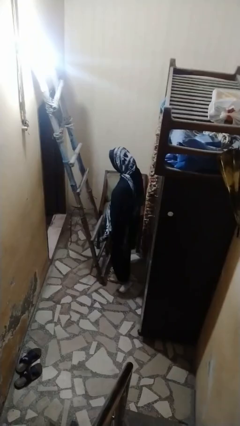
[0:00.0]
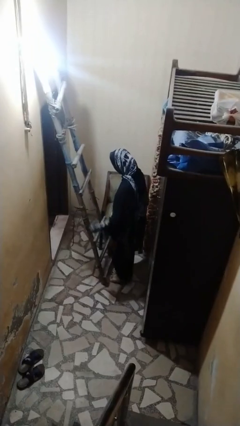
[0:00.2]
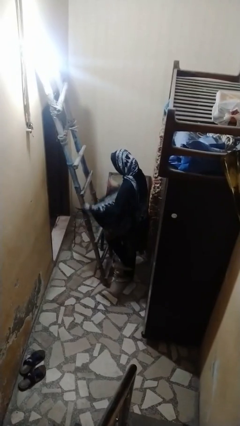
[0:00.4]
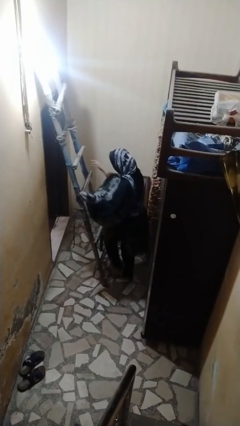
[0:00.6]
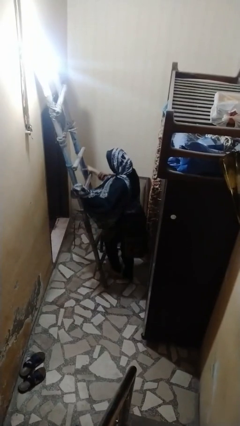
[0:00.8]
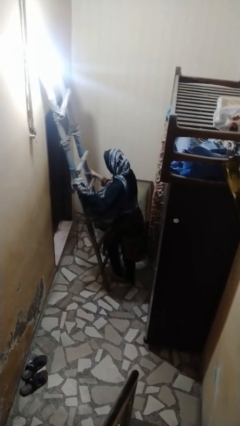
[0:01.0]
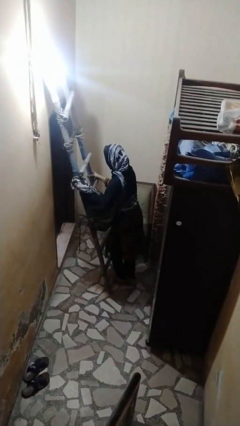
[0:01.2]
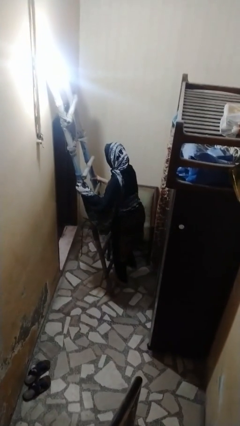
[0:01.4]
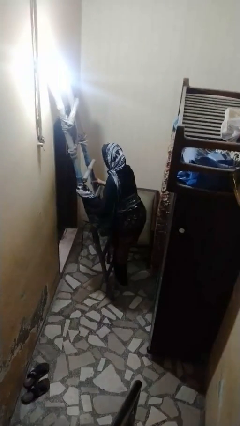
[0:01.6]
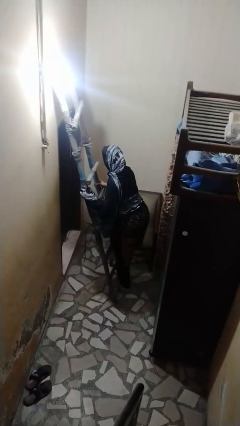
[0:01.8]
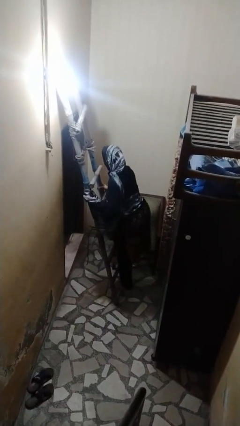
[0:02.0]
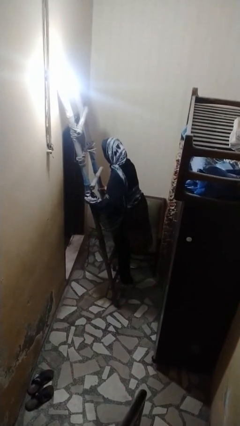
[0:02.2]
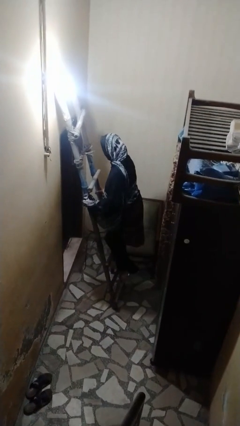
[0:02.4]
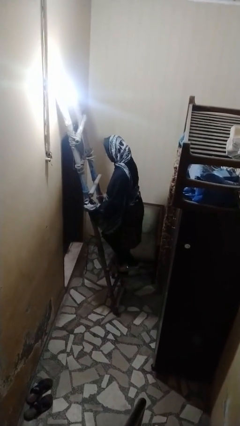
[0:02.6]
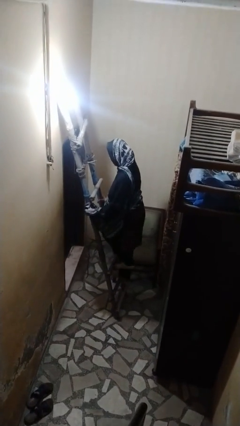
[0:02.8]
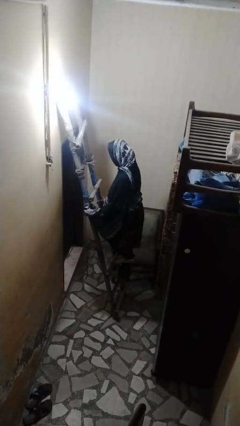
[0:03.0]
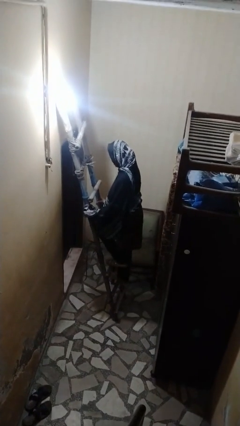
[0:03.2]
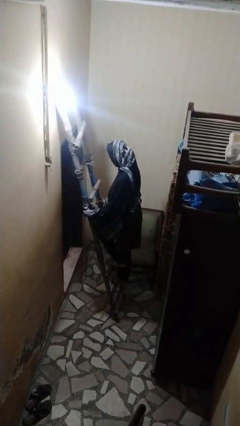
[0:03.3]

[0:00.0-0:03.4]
person climbs up ladder

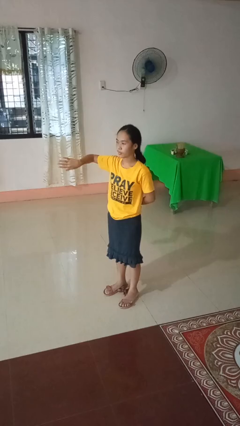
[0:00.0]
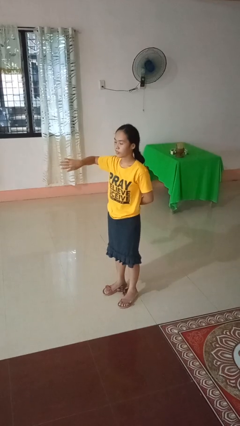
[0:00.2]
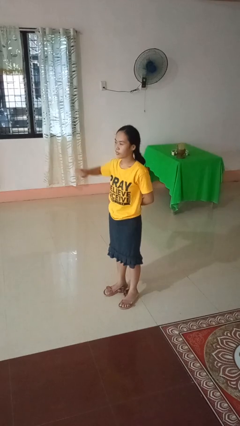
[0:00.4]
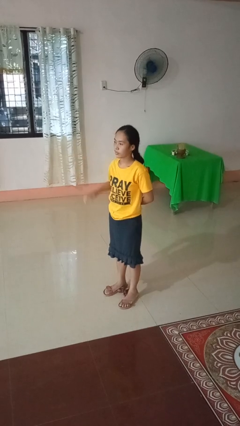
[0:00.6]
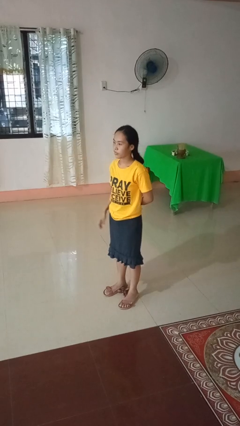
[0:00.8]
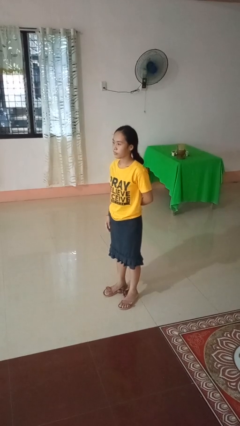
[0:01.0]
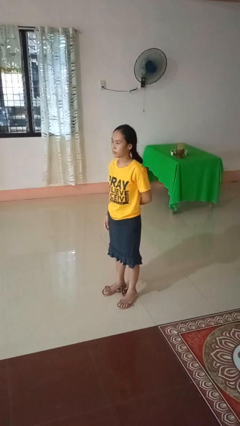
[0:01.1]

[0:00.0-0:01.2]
person gestures swipe right

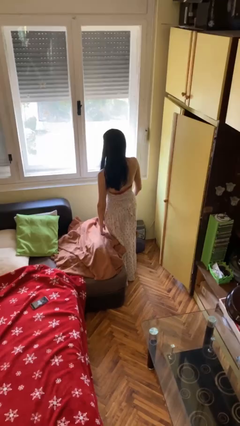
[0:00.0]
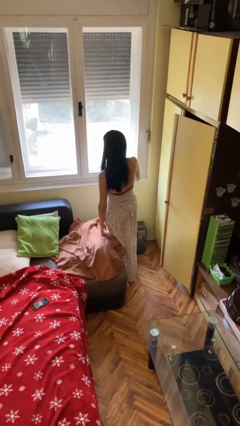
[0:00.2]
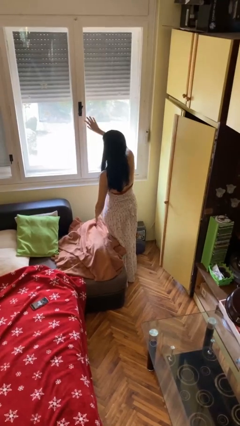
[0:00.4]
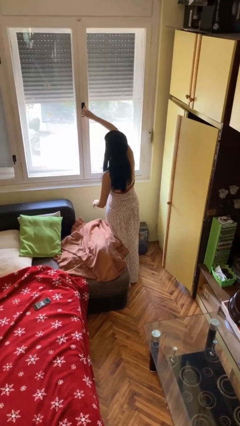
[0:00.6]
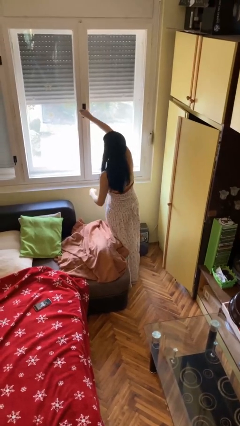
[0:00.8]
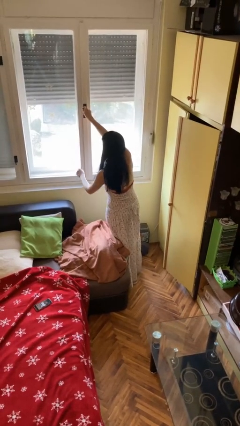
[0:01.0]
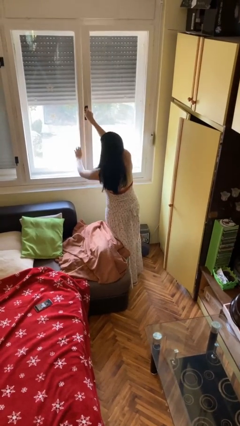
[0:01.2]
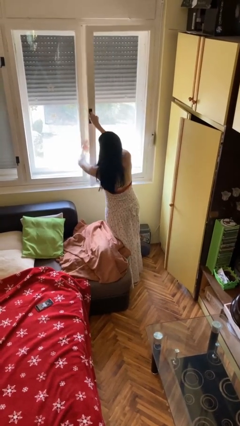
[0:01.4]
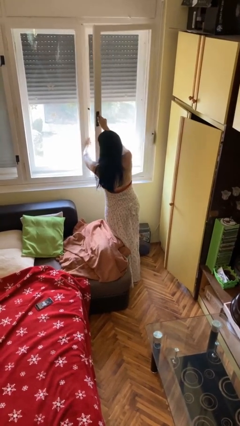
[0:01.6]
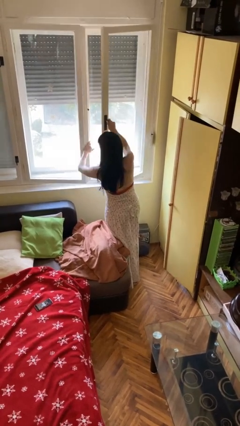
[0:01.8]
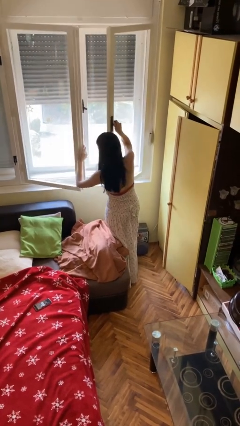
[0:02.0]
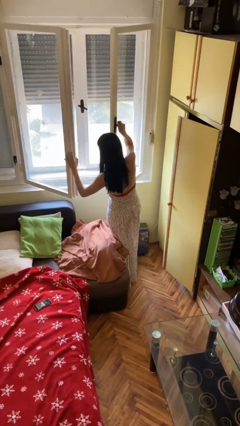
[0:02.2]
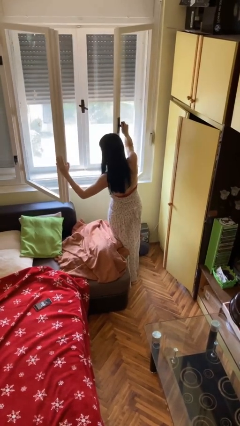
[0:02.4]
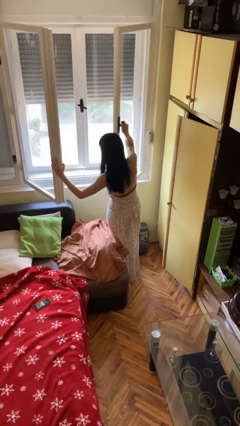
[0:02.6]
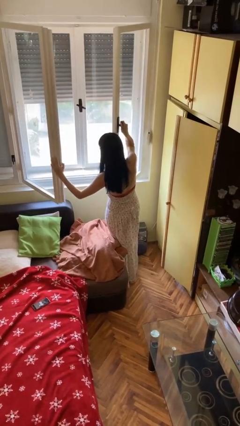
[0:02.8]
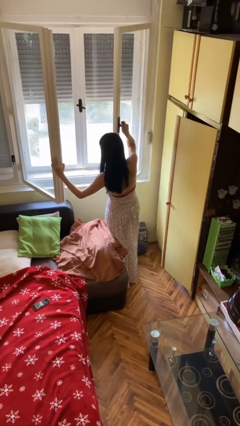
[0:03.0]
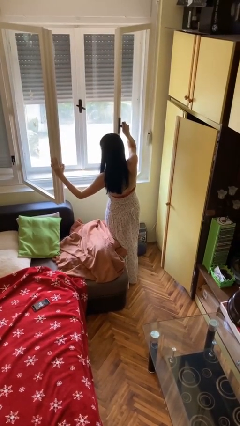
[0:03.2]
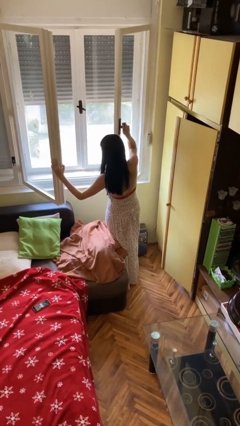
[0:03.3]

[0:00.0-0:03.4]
person opens microwave

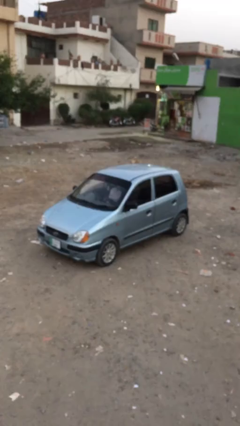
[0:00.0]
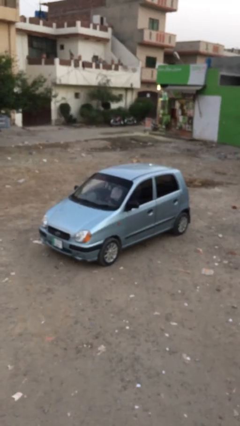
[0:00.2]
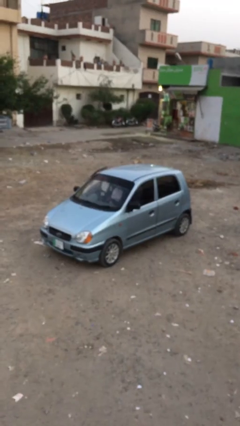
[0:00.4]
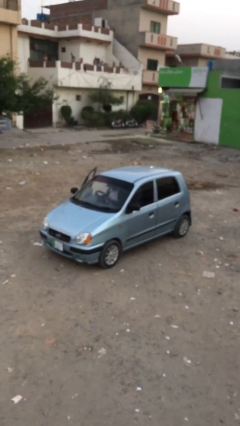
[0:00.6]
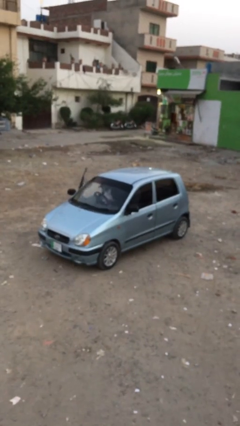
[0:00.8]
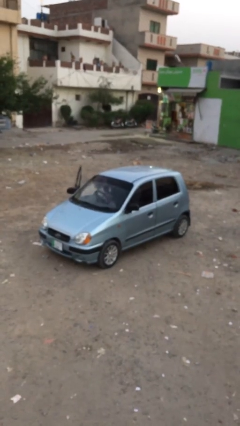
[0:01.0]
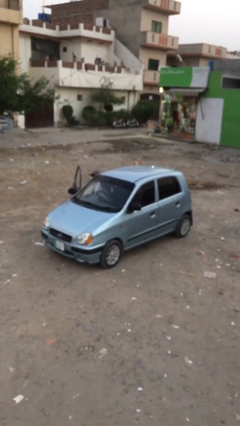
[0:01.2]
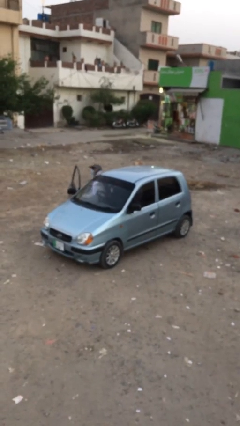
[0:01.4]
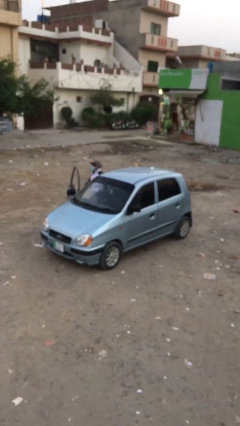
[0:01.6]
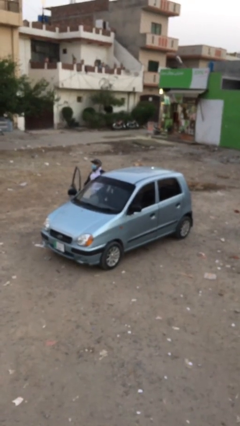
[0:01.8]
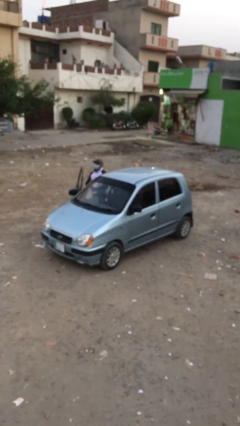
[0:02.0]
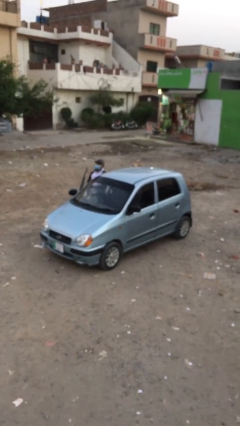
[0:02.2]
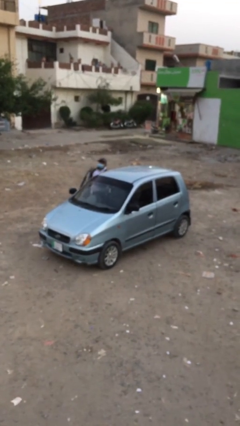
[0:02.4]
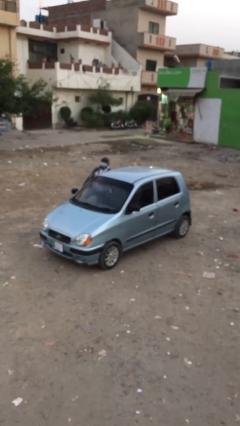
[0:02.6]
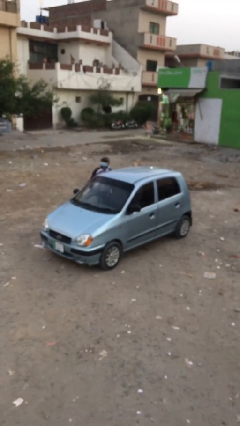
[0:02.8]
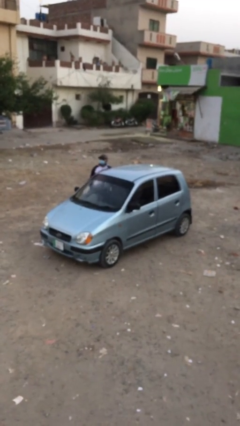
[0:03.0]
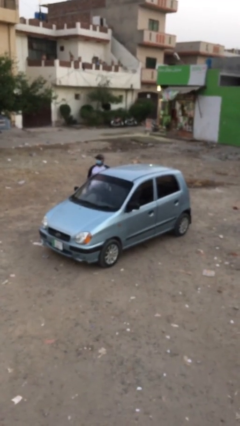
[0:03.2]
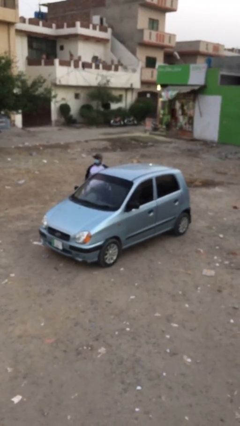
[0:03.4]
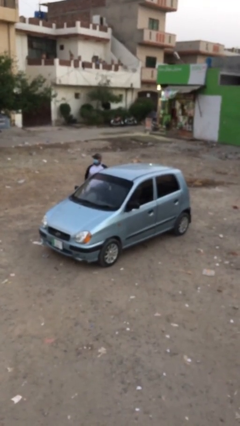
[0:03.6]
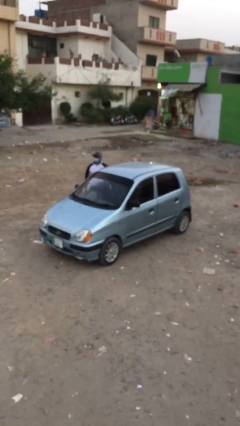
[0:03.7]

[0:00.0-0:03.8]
car drops off person

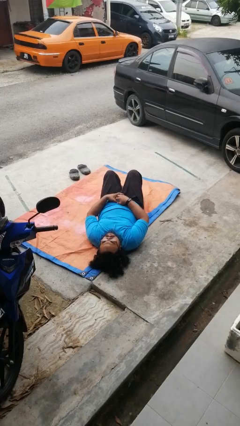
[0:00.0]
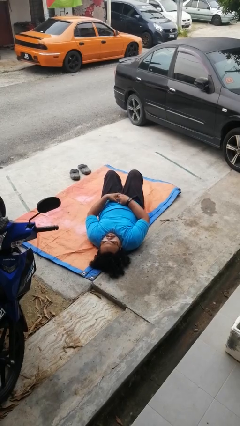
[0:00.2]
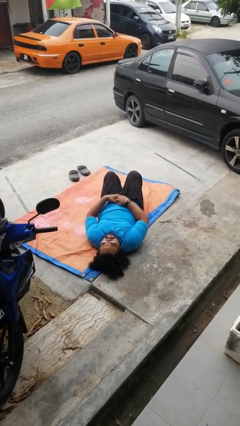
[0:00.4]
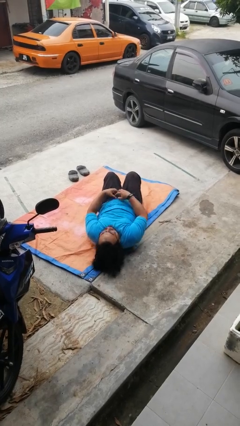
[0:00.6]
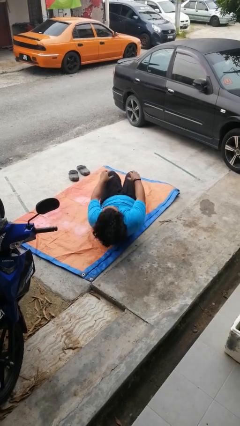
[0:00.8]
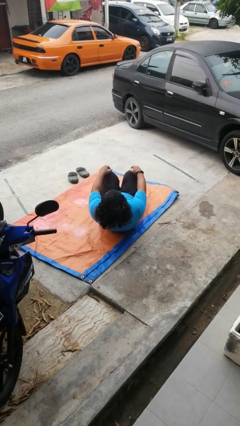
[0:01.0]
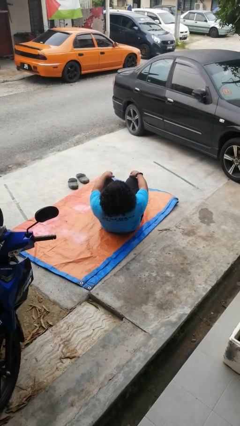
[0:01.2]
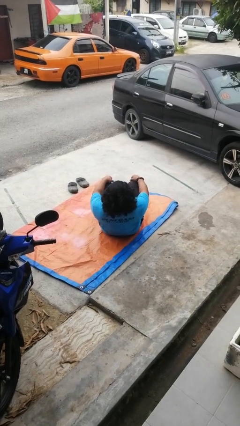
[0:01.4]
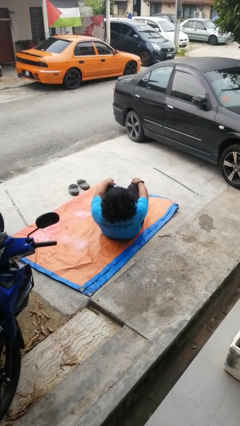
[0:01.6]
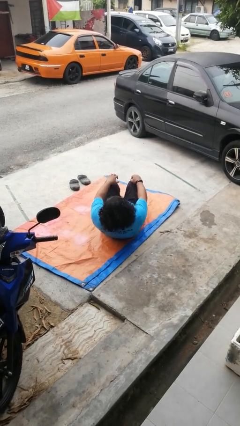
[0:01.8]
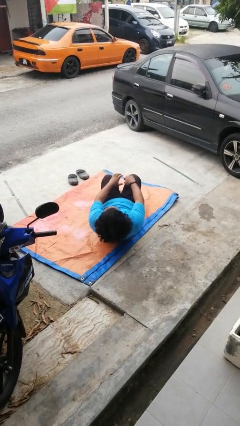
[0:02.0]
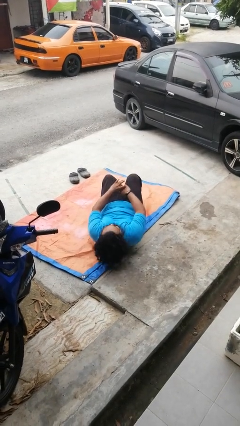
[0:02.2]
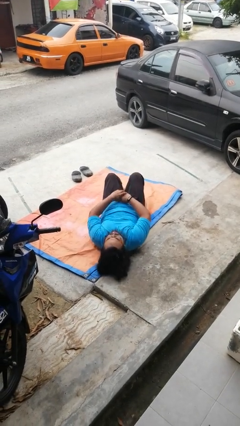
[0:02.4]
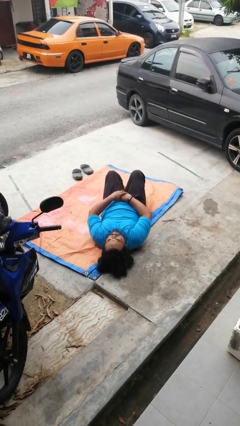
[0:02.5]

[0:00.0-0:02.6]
person exercises with situp

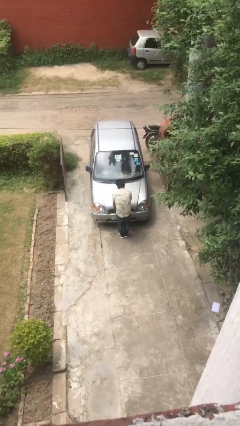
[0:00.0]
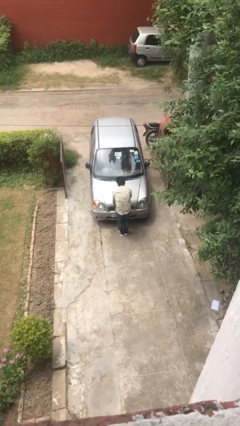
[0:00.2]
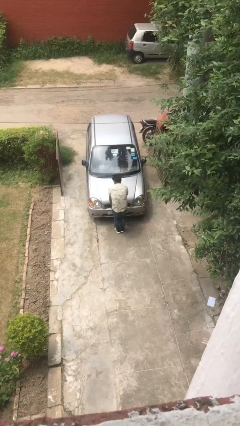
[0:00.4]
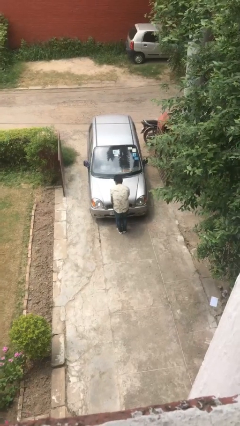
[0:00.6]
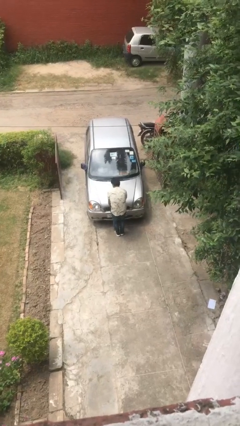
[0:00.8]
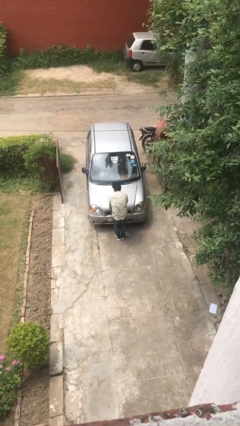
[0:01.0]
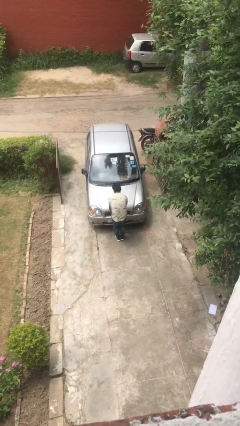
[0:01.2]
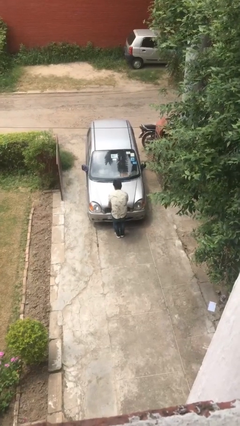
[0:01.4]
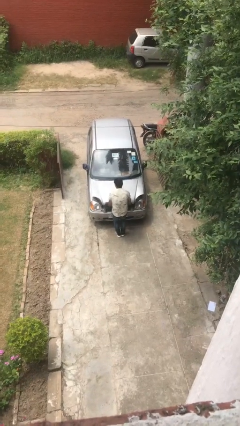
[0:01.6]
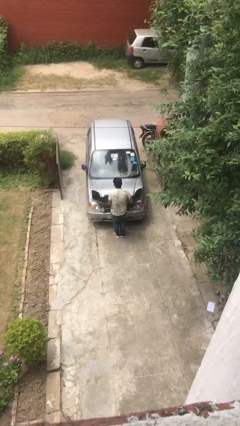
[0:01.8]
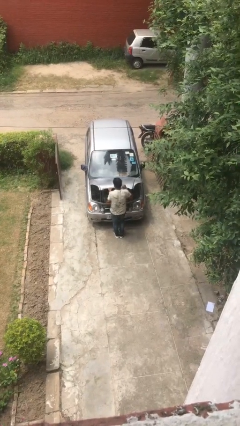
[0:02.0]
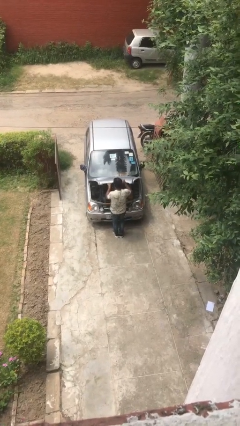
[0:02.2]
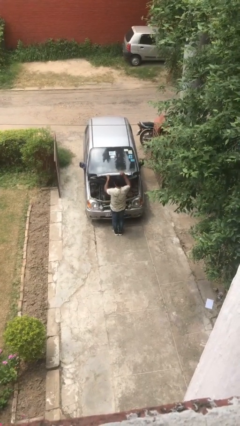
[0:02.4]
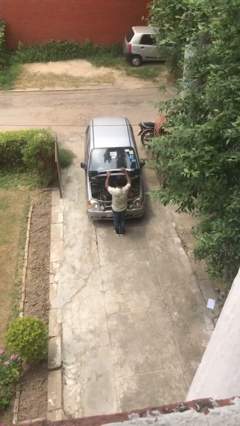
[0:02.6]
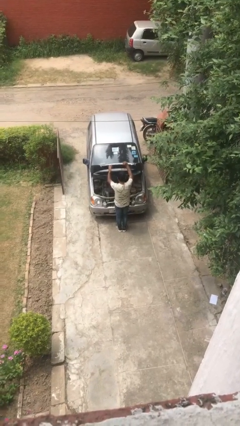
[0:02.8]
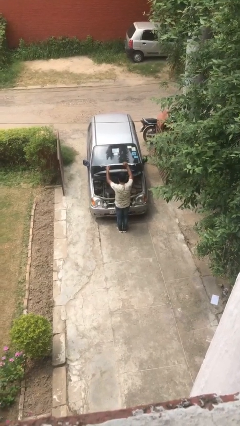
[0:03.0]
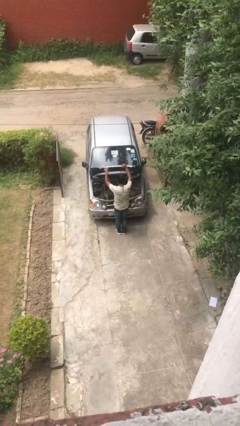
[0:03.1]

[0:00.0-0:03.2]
person opens car hood

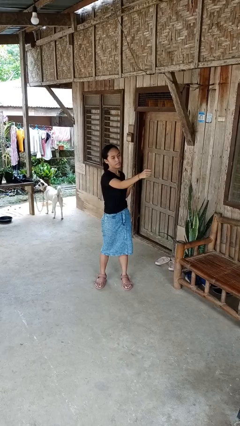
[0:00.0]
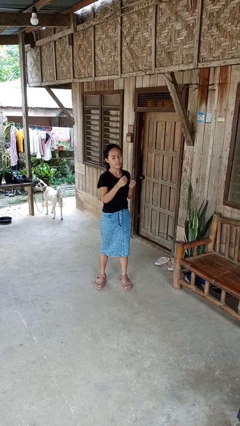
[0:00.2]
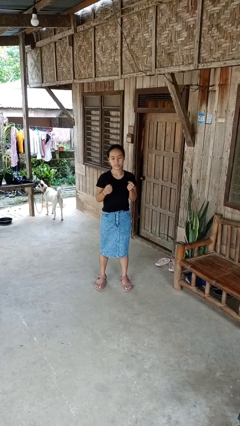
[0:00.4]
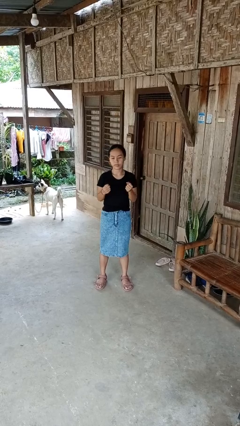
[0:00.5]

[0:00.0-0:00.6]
person punches
